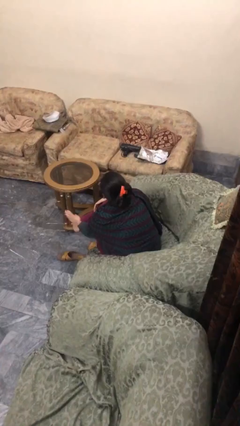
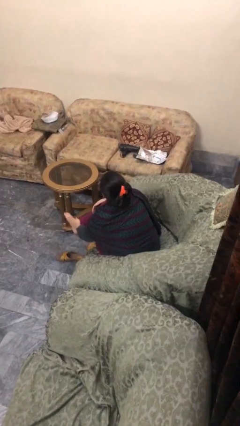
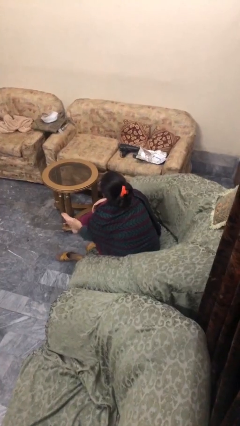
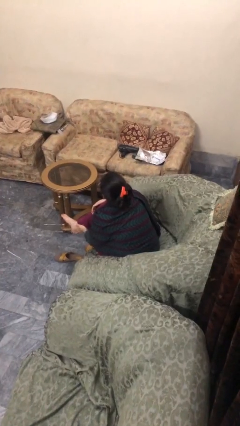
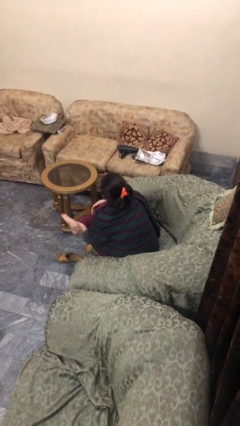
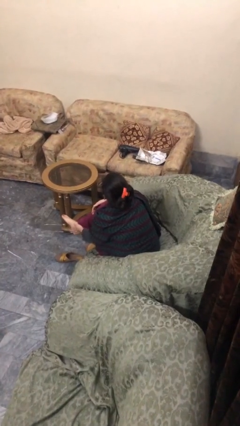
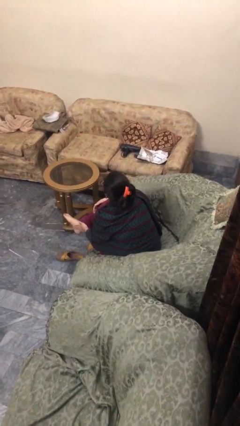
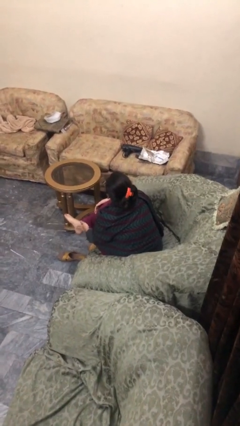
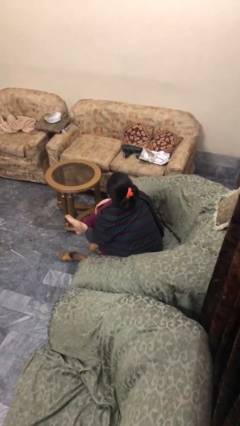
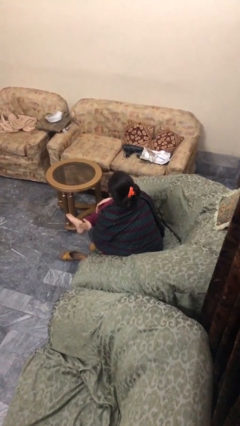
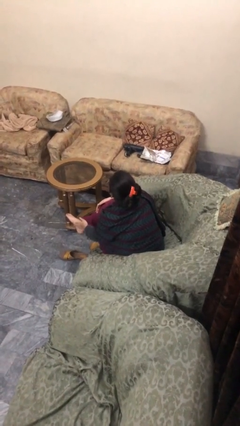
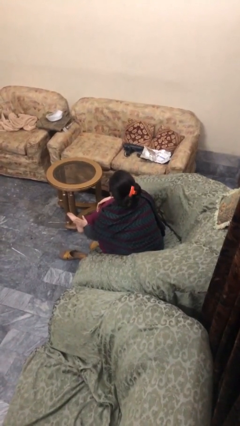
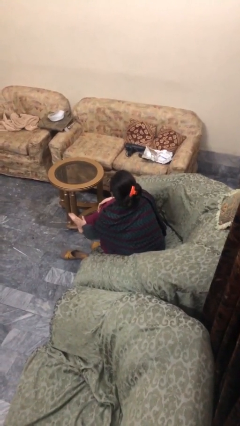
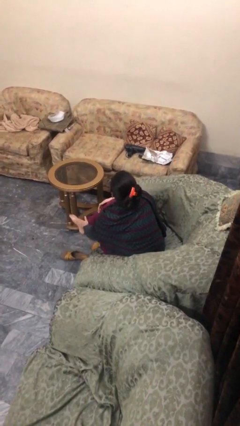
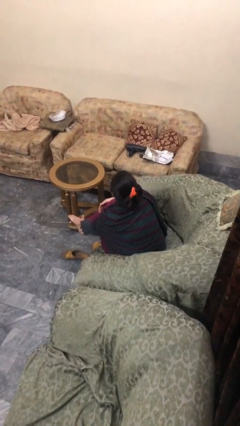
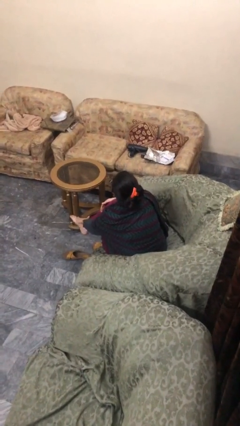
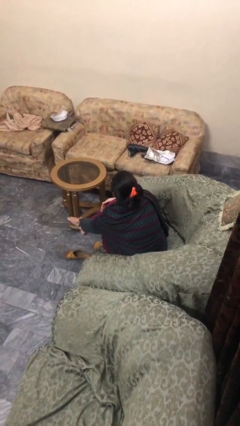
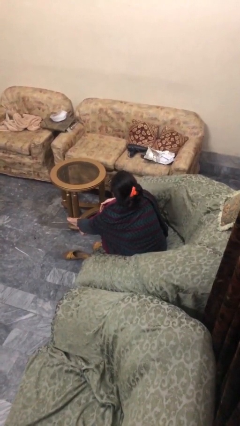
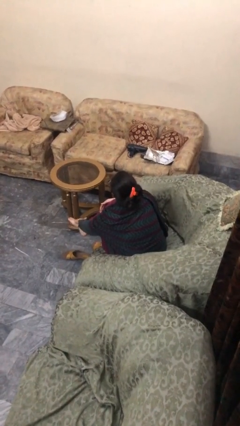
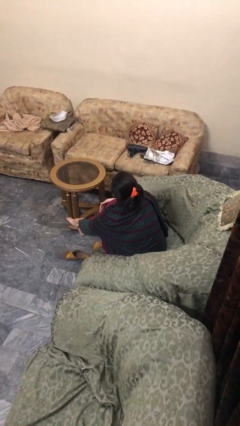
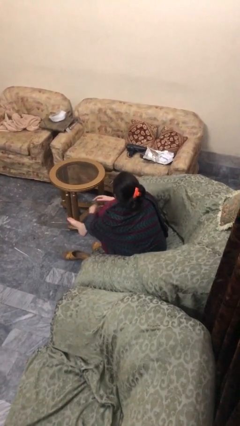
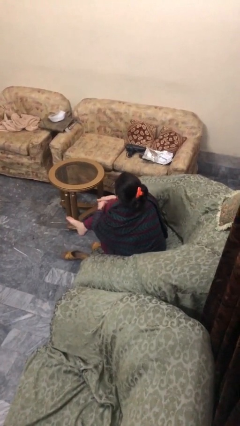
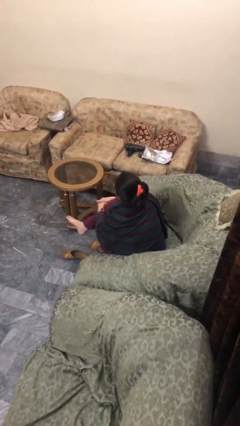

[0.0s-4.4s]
person rubs foot

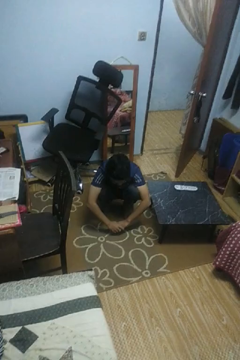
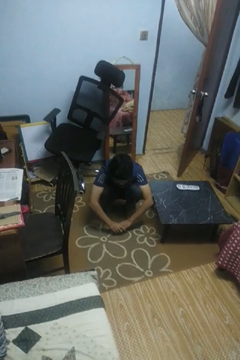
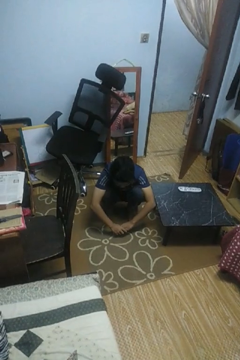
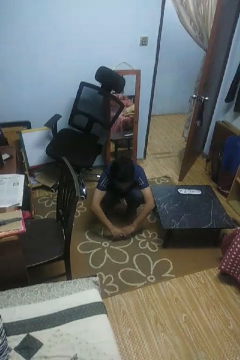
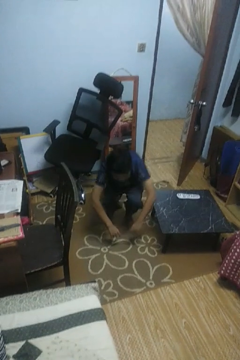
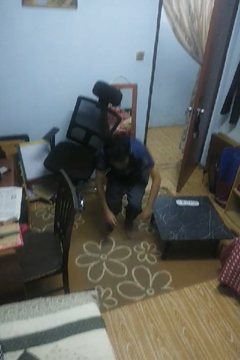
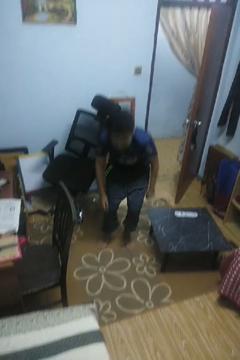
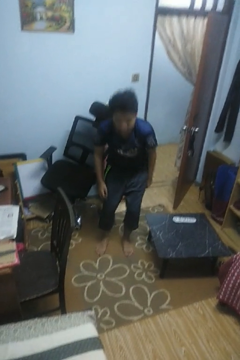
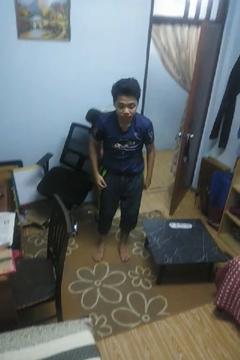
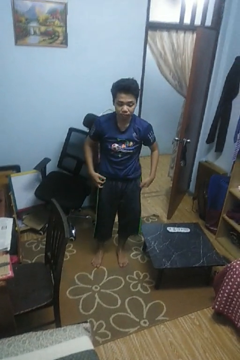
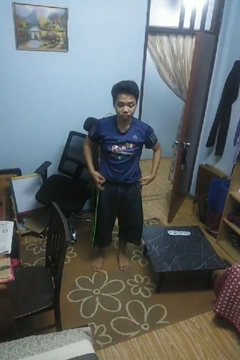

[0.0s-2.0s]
person stands up

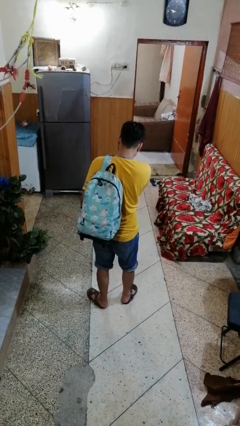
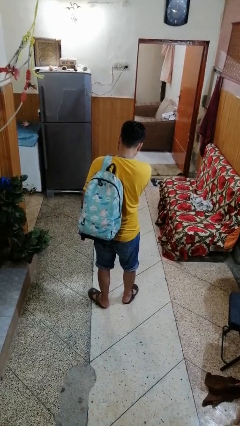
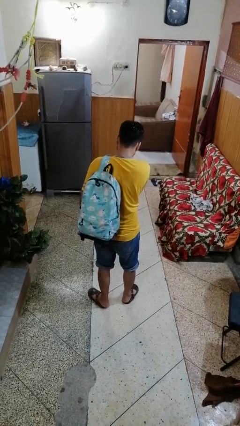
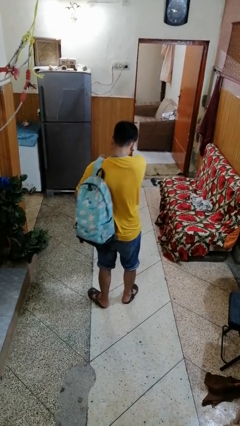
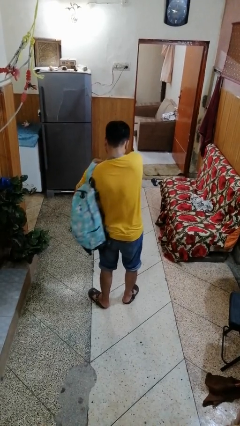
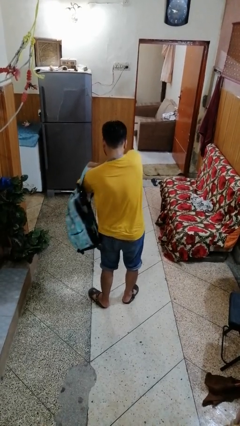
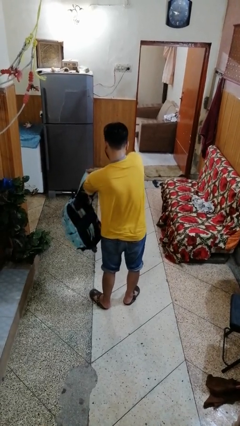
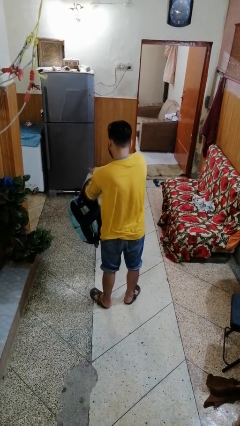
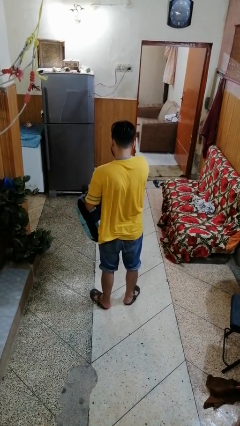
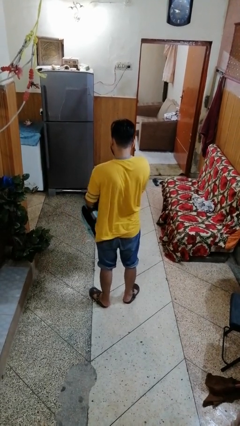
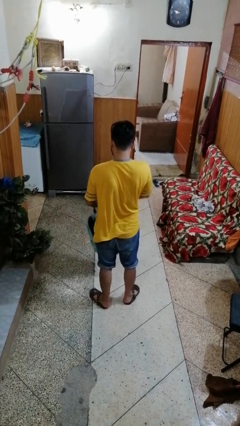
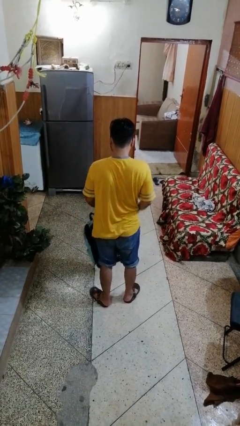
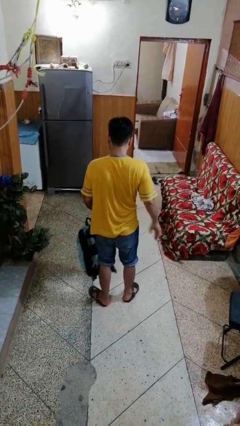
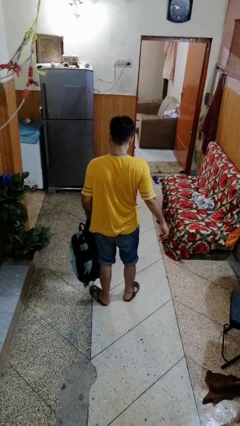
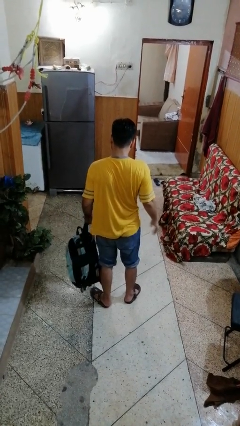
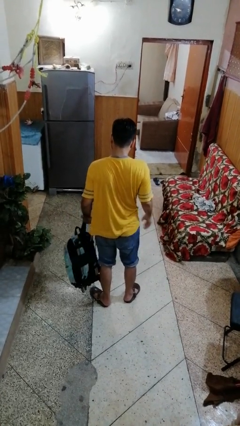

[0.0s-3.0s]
person takes off backpack

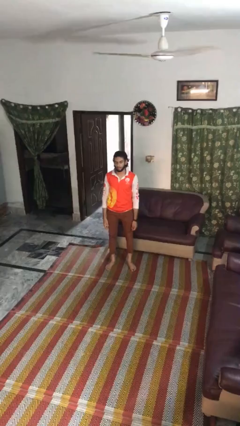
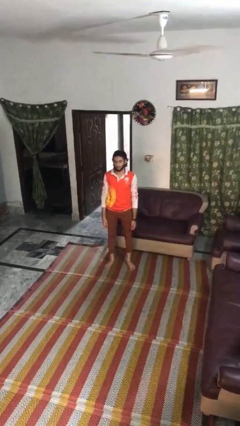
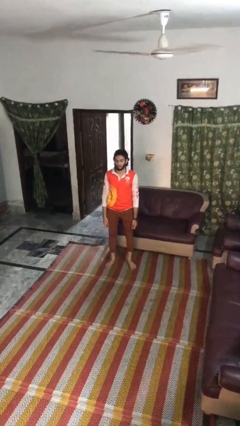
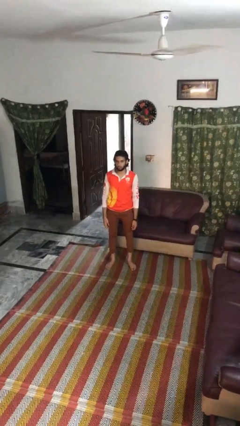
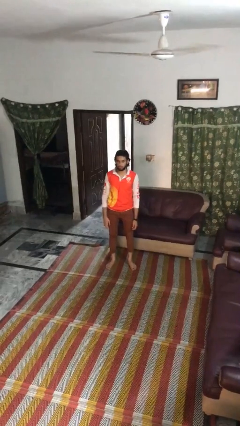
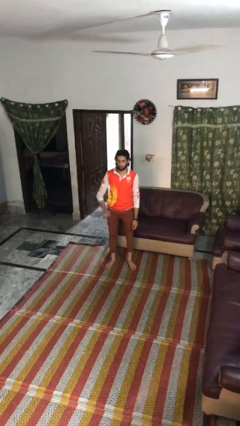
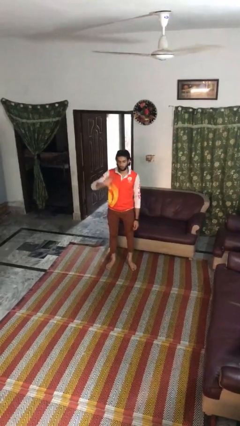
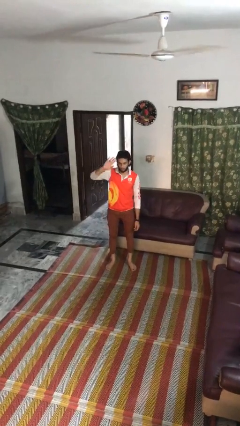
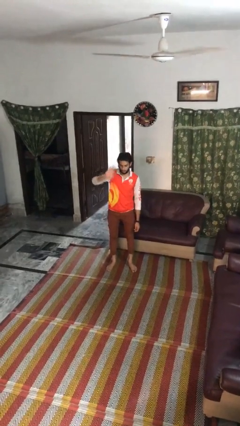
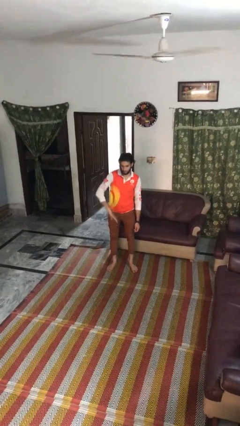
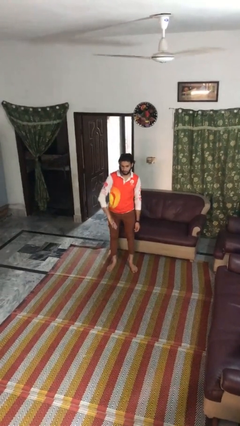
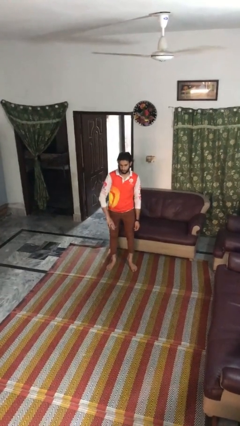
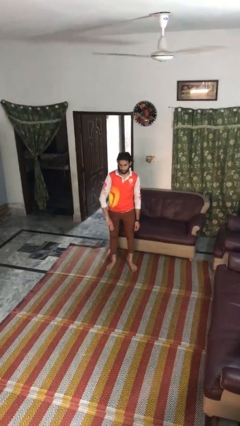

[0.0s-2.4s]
person gestures swipe down

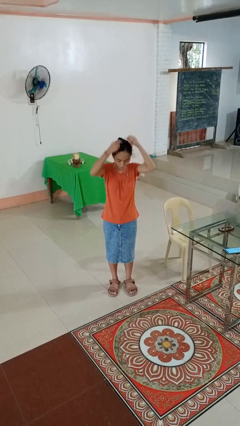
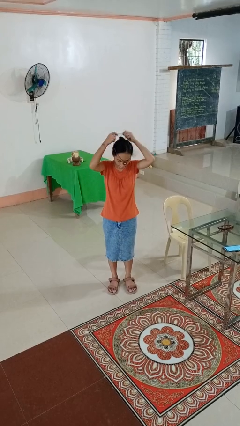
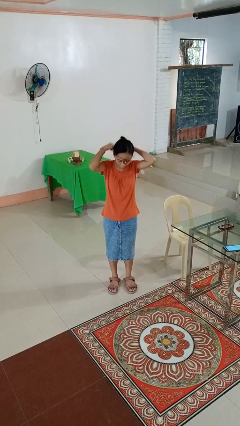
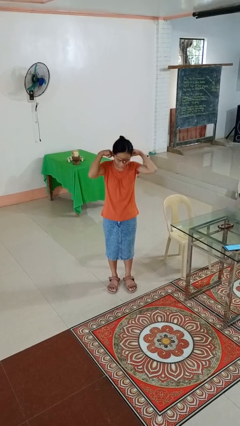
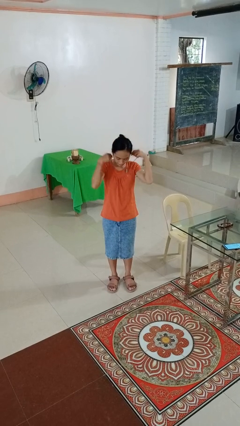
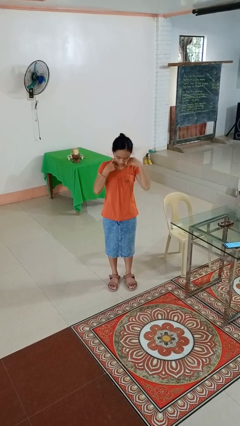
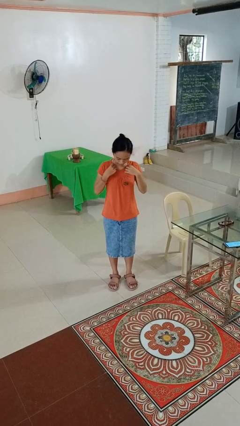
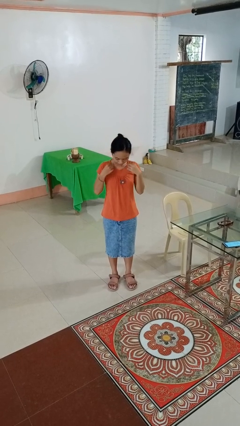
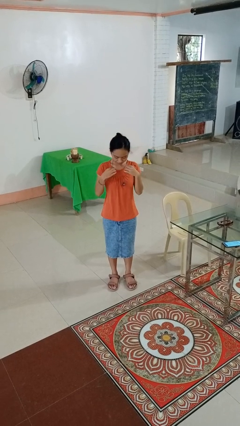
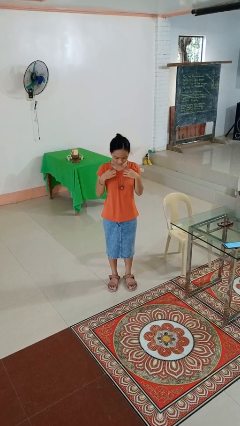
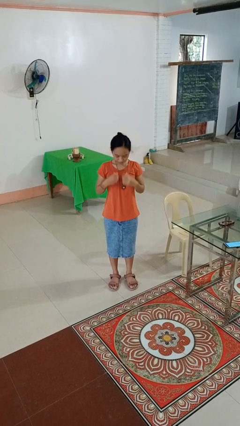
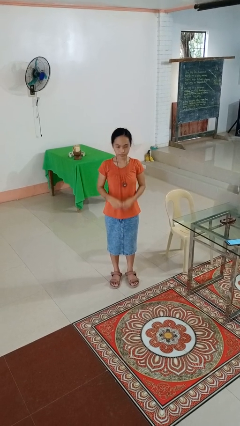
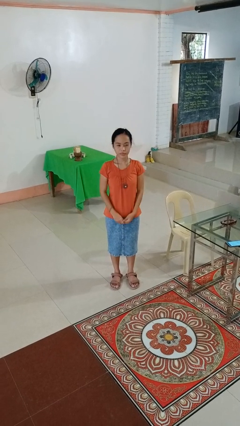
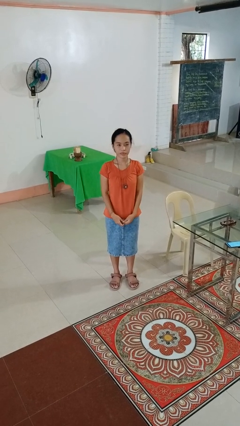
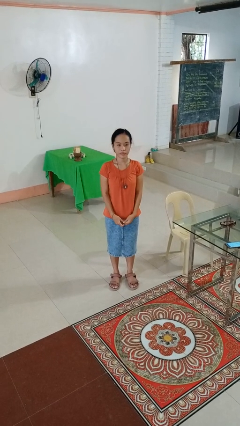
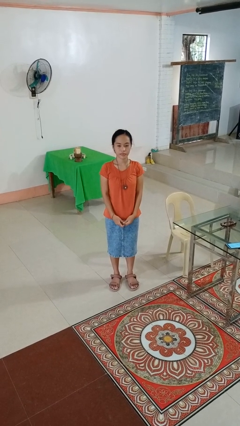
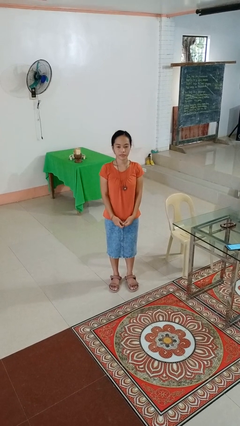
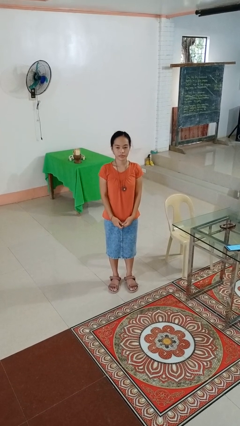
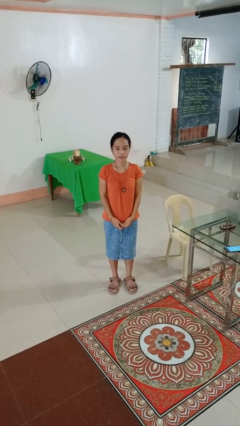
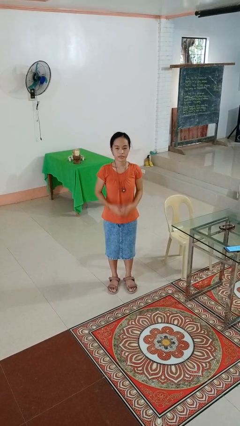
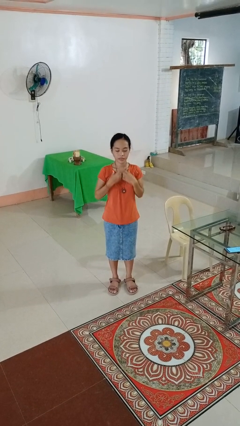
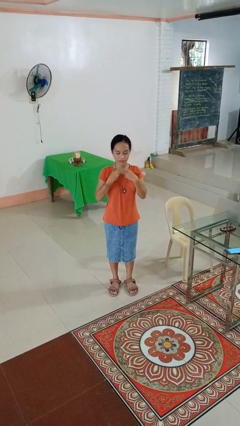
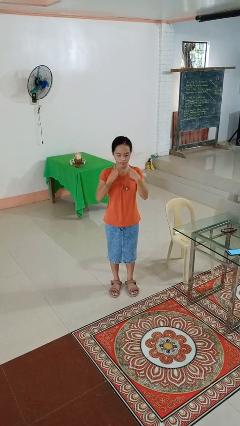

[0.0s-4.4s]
person puts on necklace

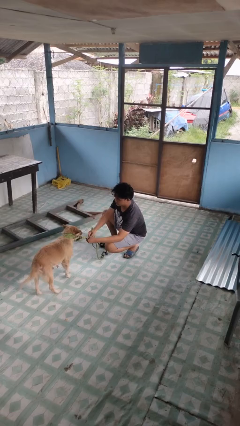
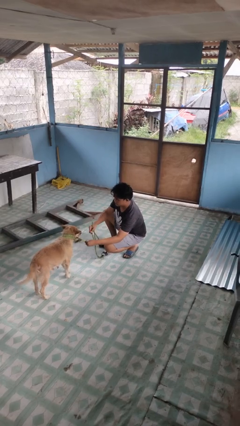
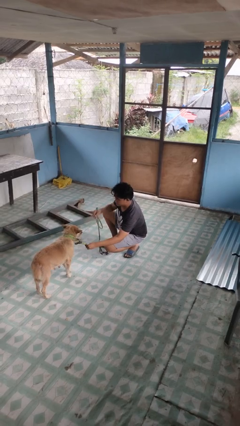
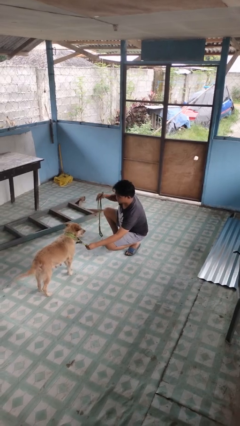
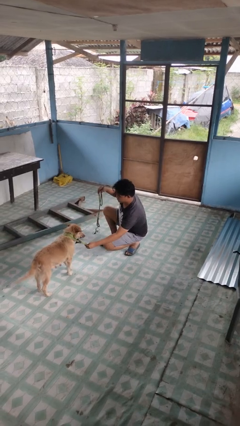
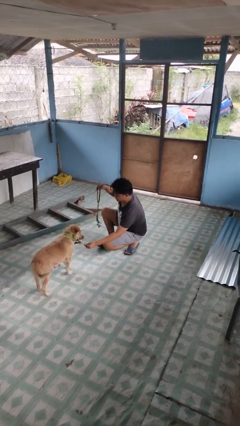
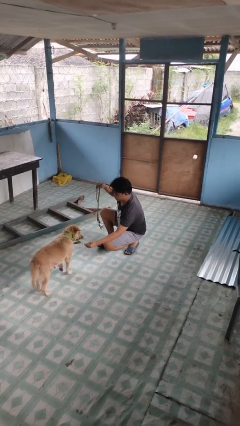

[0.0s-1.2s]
person unattaches leash from dog

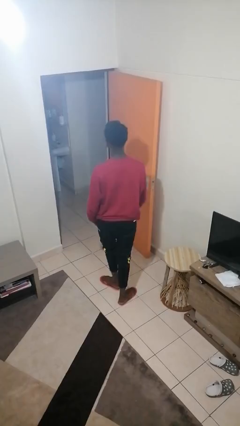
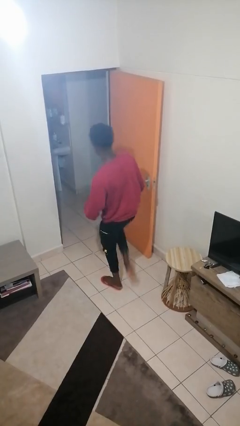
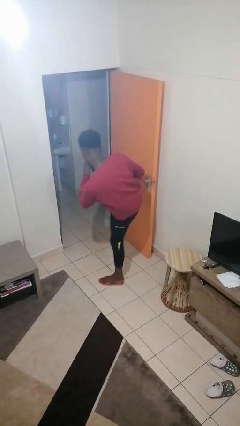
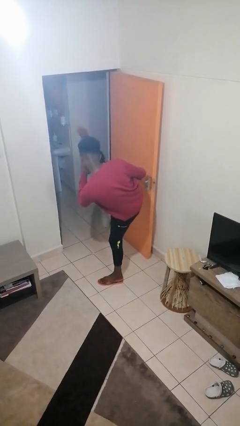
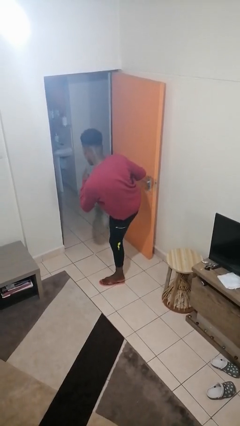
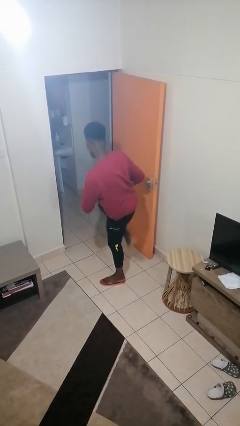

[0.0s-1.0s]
person karate kicks
